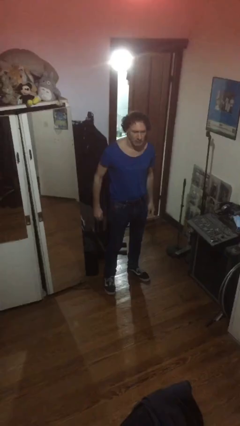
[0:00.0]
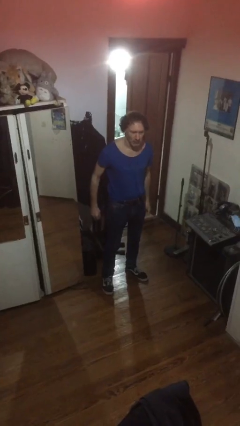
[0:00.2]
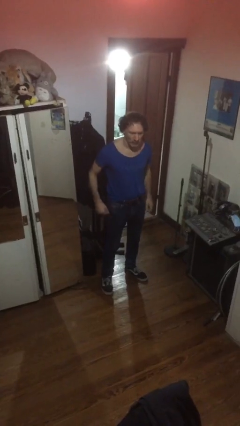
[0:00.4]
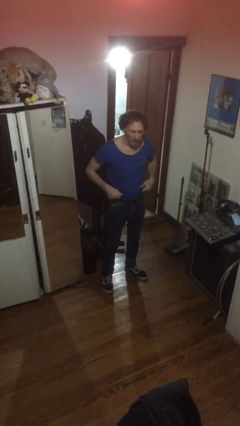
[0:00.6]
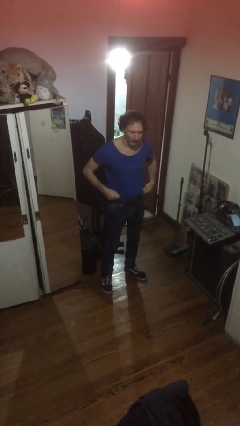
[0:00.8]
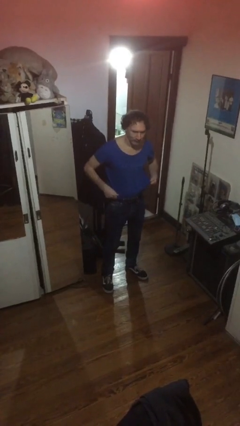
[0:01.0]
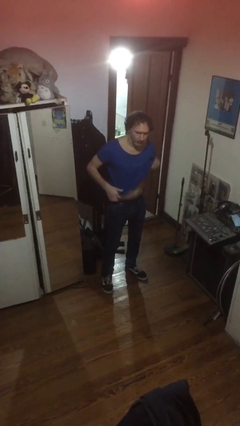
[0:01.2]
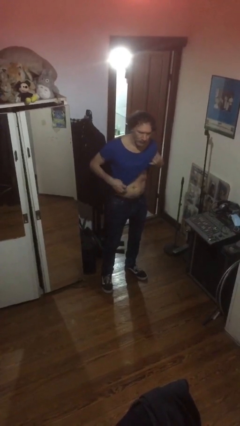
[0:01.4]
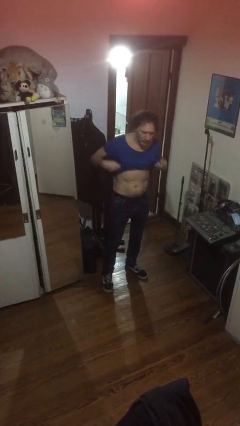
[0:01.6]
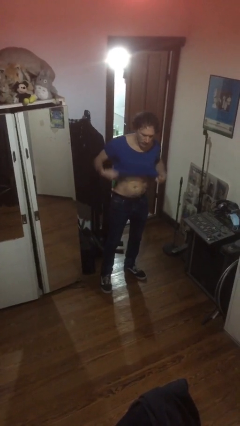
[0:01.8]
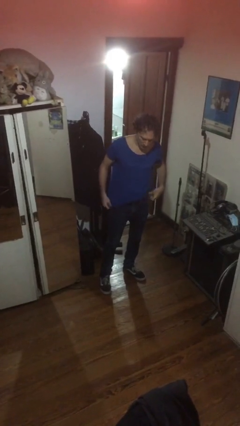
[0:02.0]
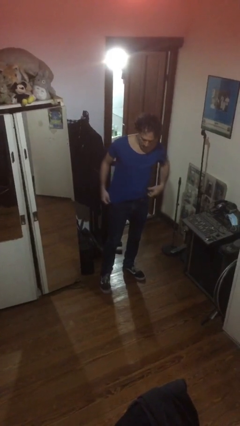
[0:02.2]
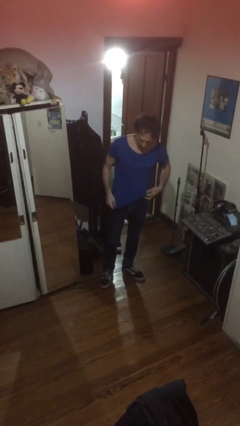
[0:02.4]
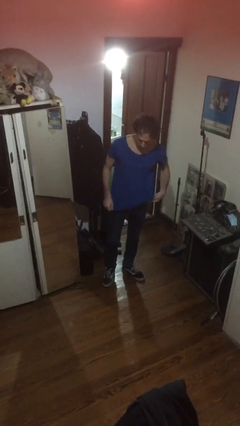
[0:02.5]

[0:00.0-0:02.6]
person untucks shirt

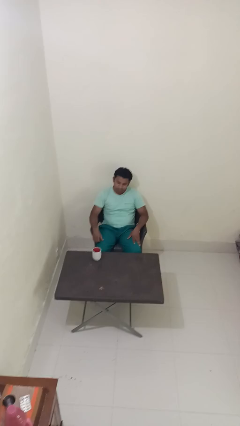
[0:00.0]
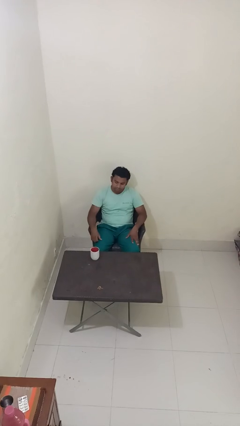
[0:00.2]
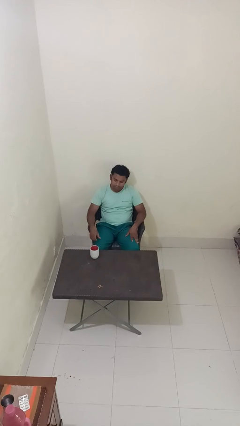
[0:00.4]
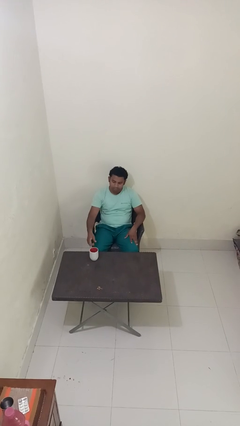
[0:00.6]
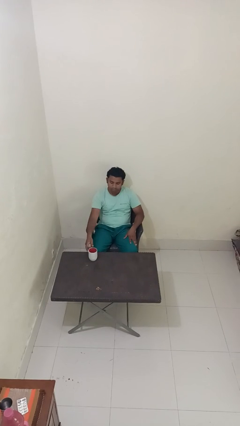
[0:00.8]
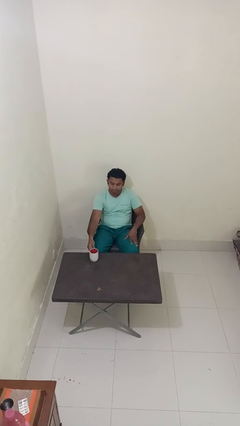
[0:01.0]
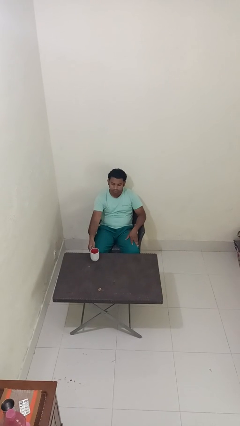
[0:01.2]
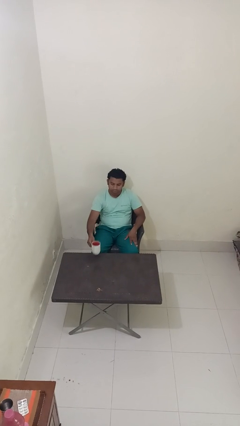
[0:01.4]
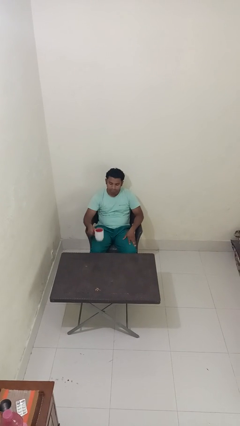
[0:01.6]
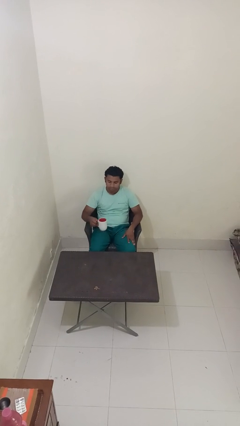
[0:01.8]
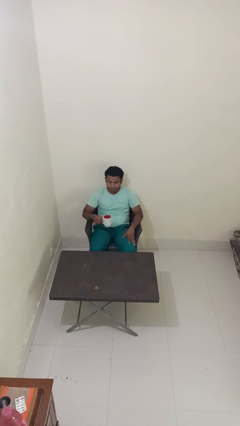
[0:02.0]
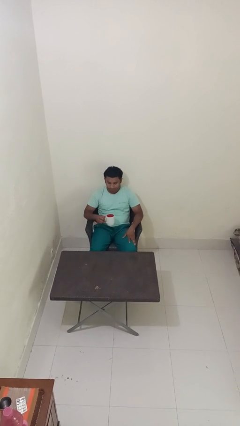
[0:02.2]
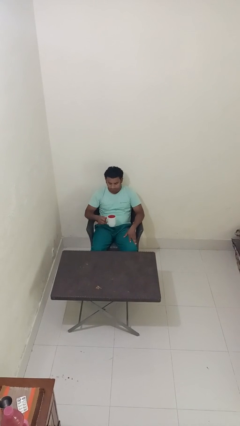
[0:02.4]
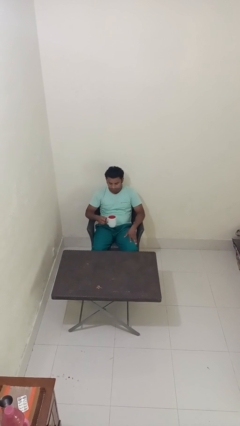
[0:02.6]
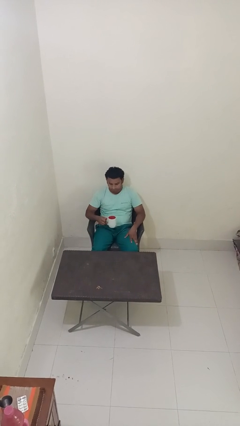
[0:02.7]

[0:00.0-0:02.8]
person picks up object from table

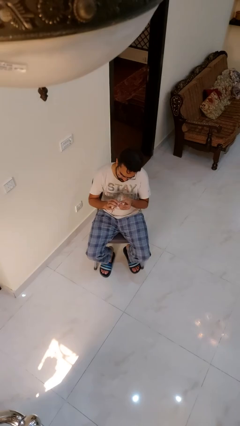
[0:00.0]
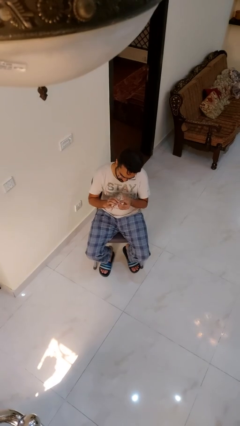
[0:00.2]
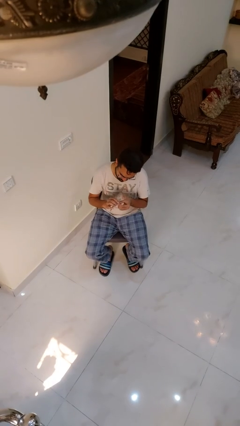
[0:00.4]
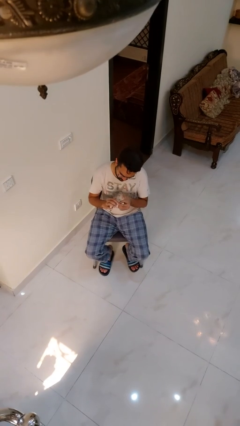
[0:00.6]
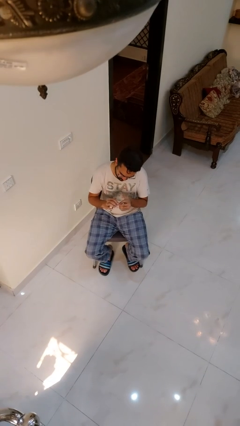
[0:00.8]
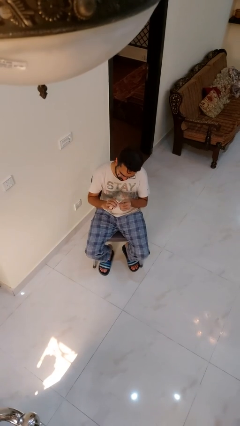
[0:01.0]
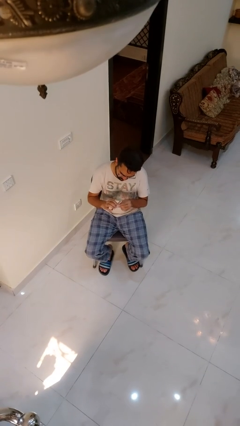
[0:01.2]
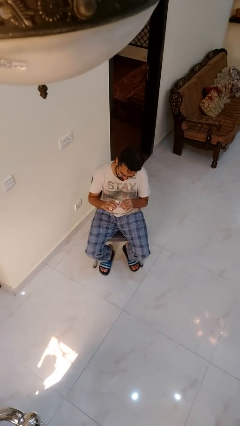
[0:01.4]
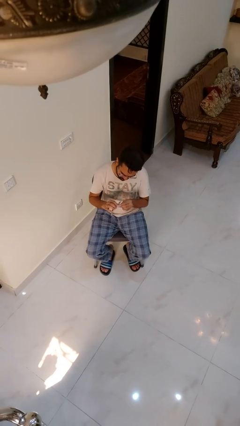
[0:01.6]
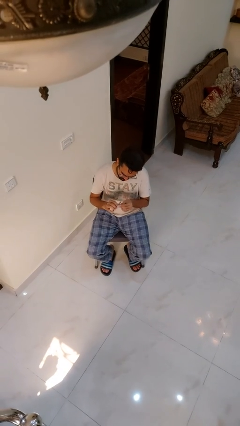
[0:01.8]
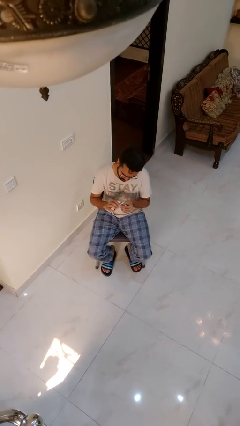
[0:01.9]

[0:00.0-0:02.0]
person files fingernails

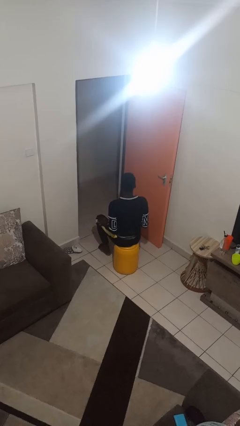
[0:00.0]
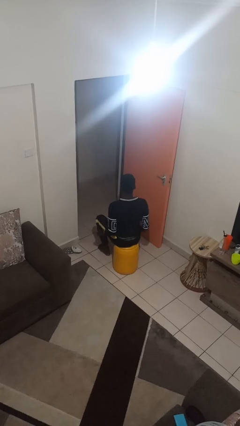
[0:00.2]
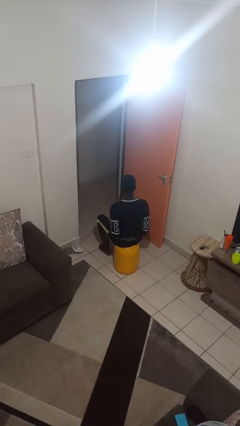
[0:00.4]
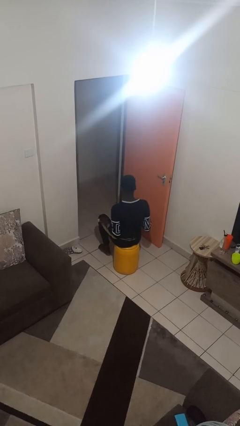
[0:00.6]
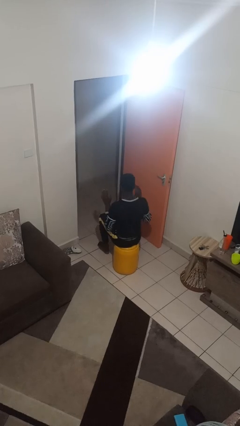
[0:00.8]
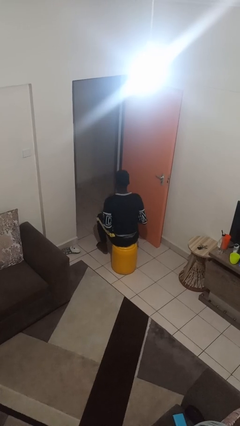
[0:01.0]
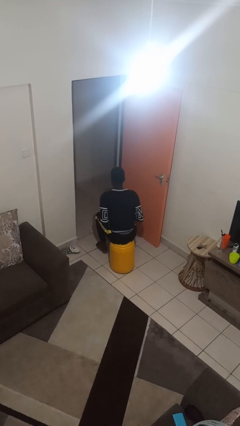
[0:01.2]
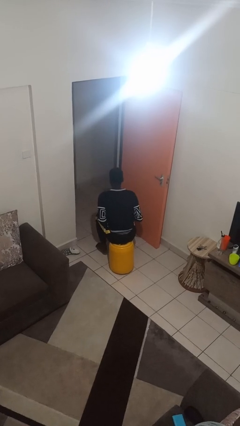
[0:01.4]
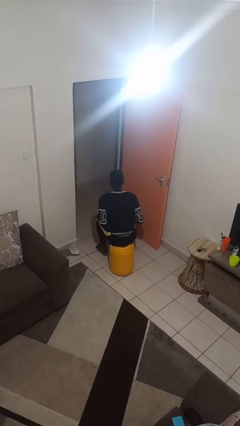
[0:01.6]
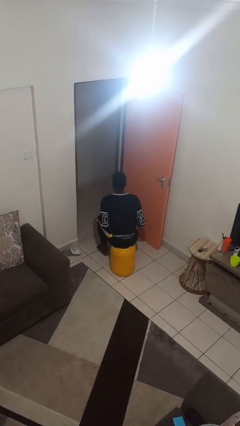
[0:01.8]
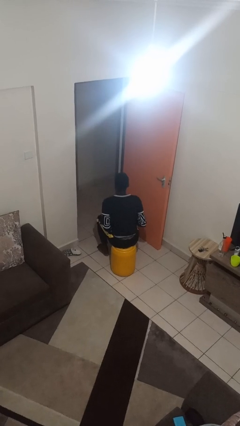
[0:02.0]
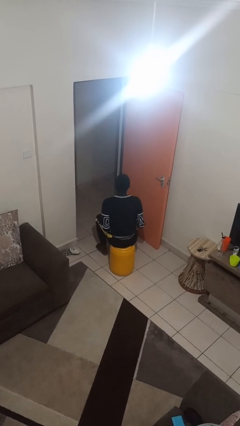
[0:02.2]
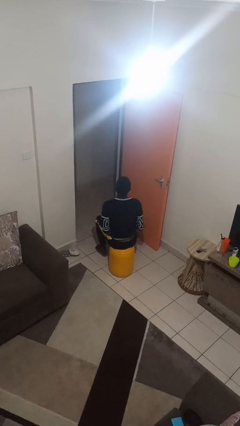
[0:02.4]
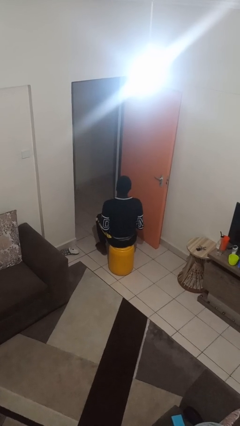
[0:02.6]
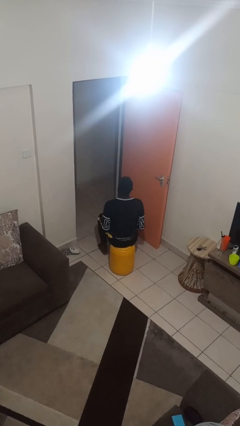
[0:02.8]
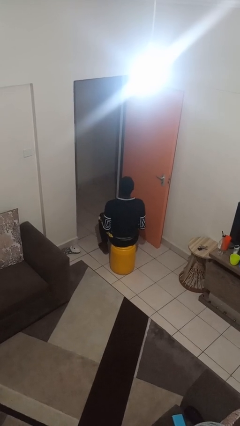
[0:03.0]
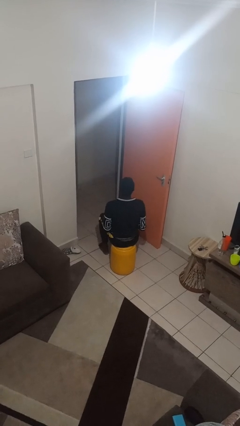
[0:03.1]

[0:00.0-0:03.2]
person slaps hands on thighs

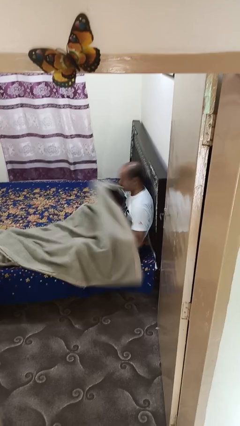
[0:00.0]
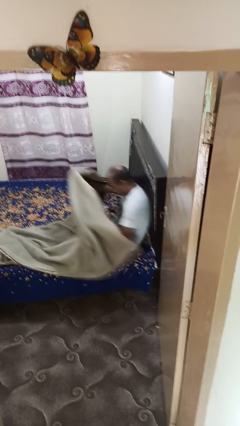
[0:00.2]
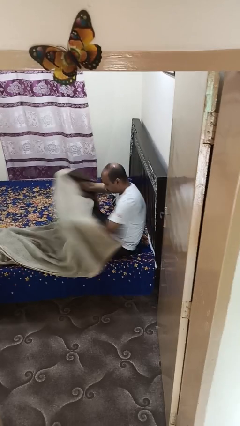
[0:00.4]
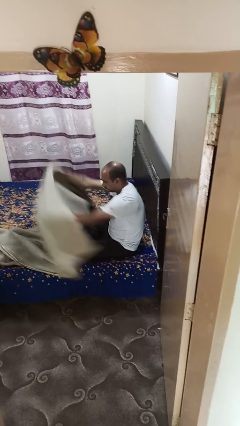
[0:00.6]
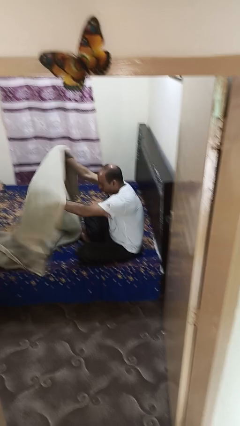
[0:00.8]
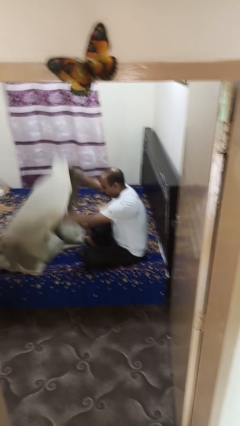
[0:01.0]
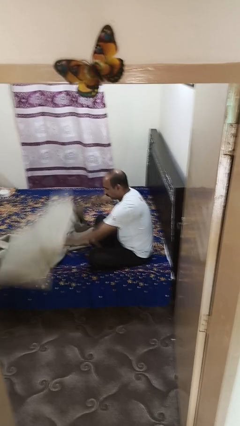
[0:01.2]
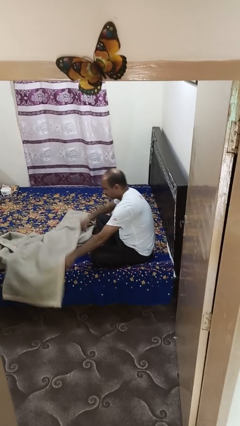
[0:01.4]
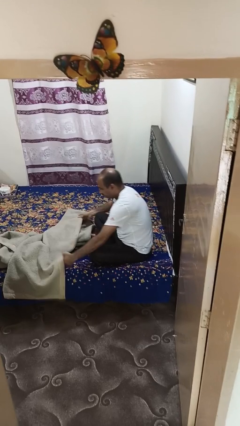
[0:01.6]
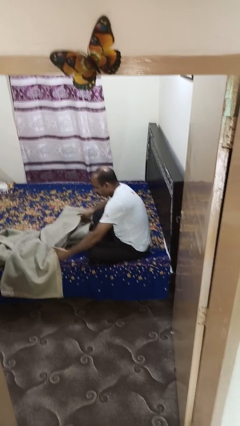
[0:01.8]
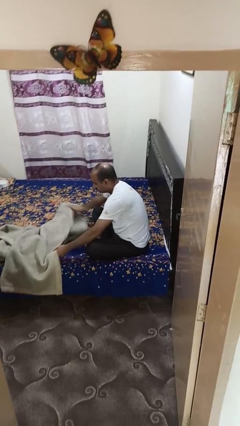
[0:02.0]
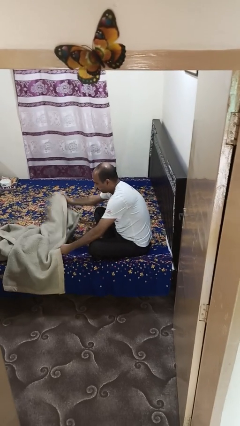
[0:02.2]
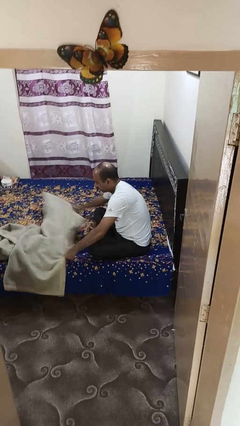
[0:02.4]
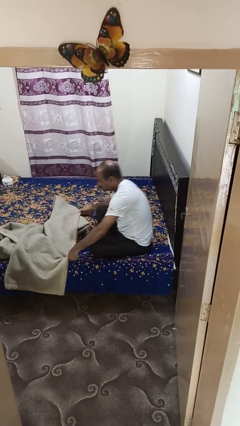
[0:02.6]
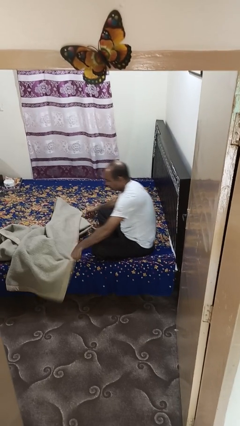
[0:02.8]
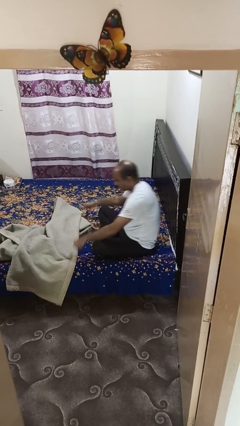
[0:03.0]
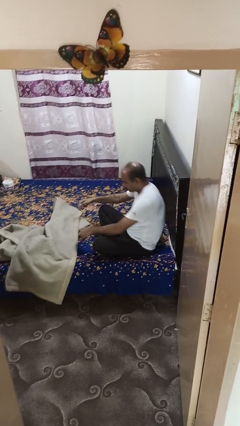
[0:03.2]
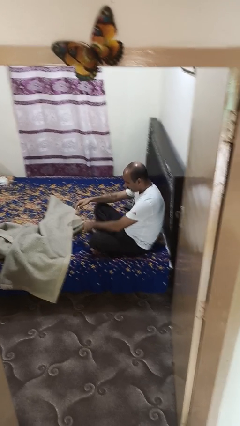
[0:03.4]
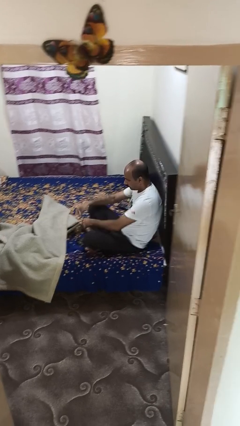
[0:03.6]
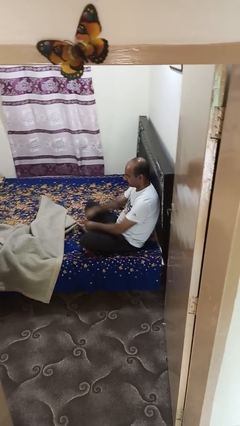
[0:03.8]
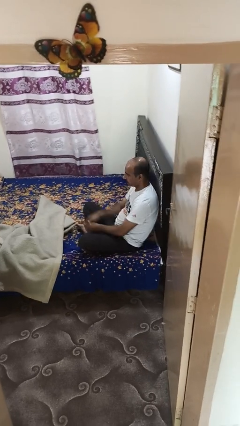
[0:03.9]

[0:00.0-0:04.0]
person uncovers with blanket

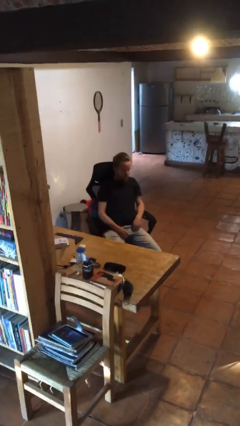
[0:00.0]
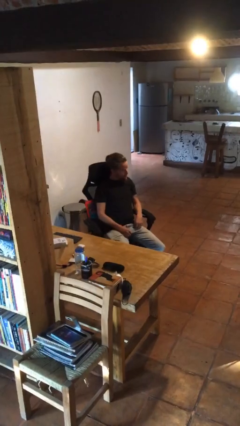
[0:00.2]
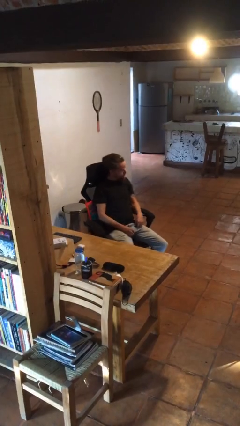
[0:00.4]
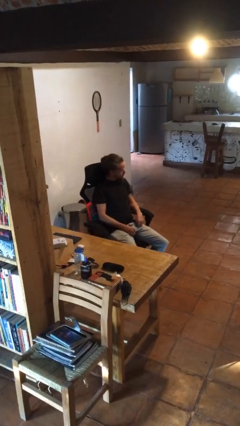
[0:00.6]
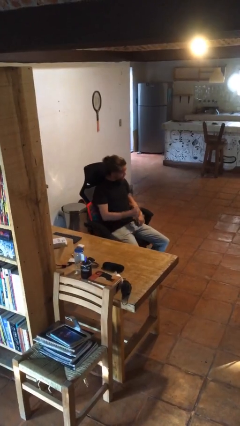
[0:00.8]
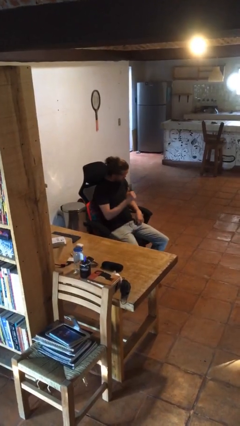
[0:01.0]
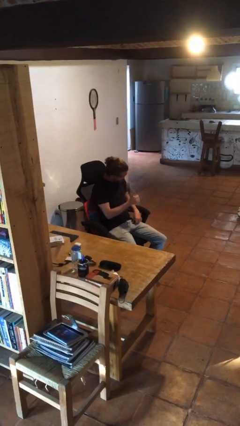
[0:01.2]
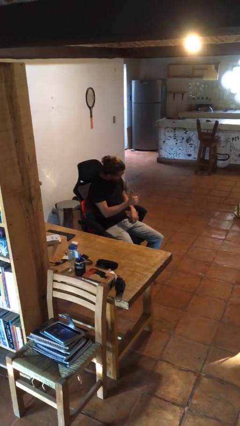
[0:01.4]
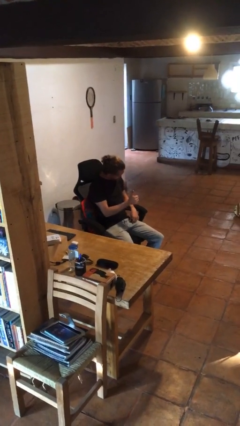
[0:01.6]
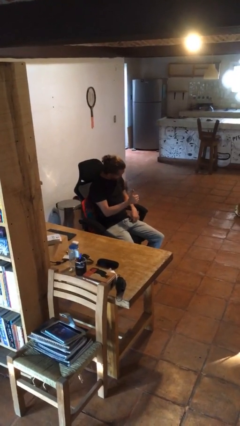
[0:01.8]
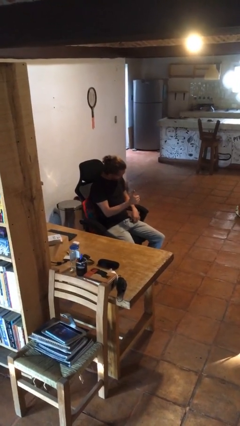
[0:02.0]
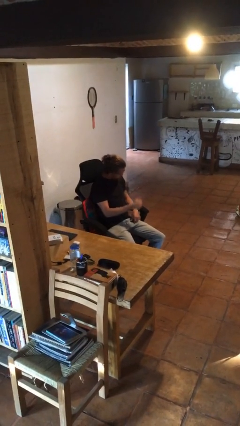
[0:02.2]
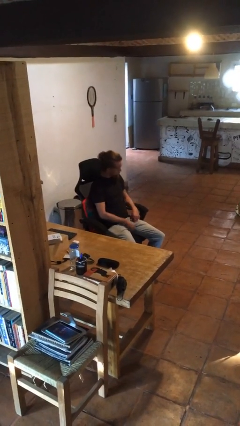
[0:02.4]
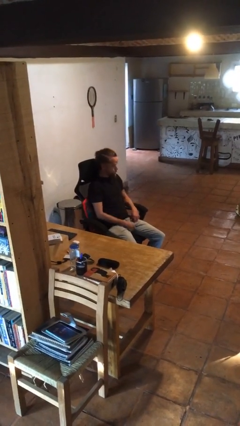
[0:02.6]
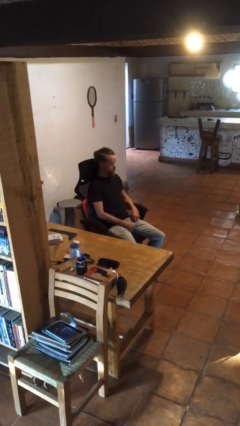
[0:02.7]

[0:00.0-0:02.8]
person gestures thumbs up
